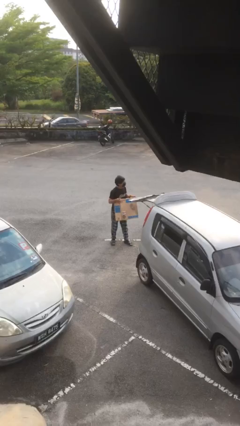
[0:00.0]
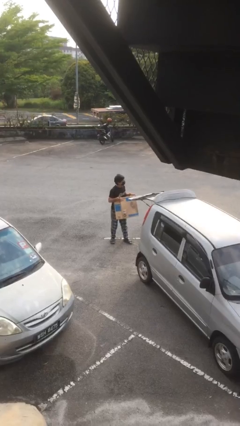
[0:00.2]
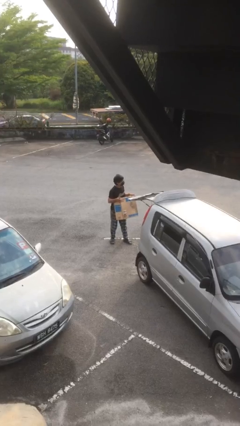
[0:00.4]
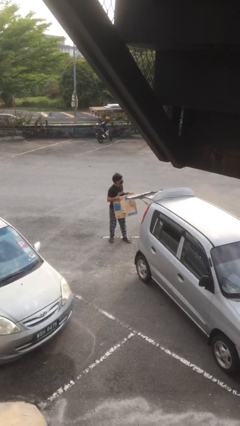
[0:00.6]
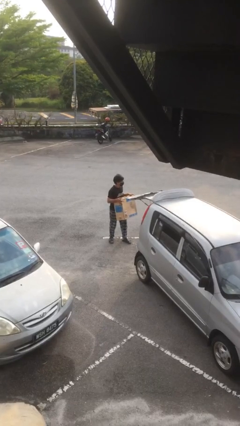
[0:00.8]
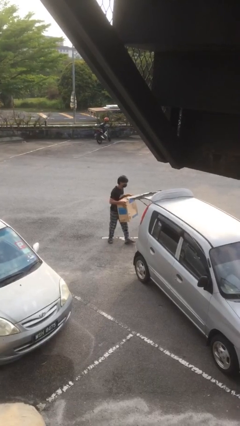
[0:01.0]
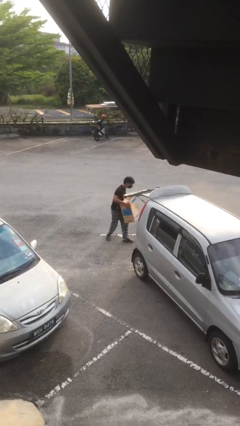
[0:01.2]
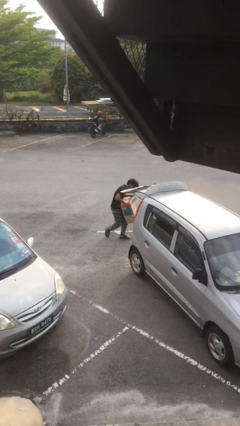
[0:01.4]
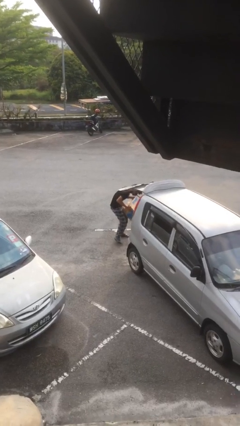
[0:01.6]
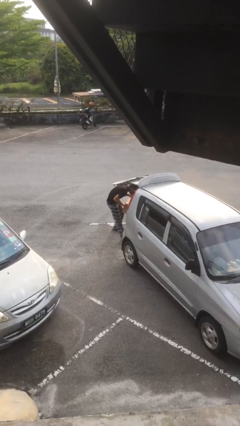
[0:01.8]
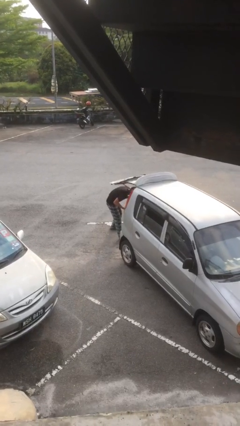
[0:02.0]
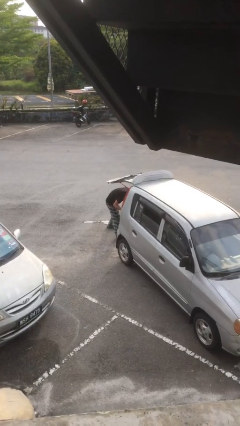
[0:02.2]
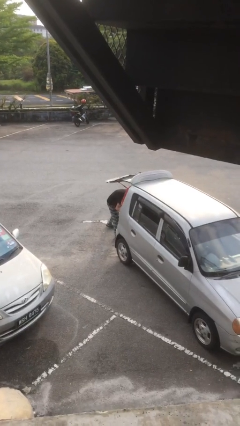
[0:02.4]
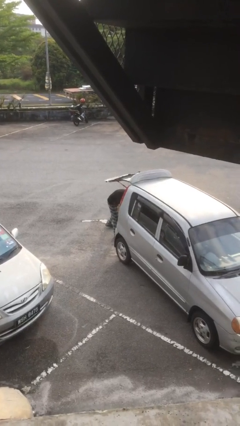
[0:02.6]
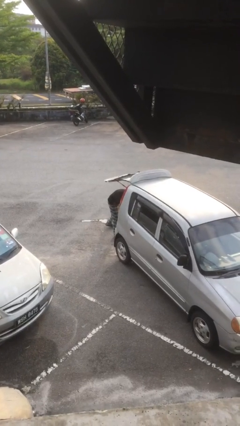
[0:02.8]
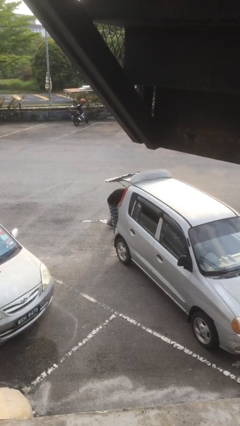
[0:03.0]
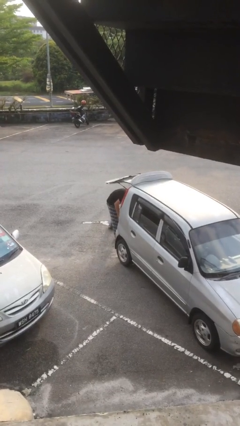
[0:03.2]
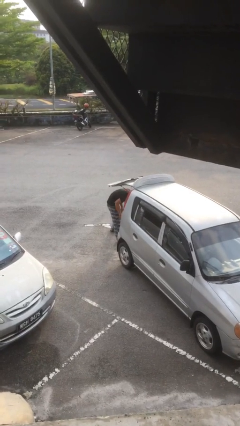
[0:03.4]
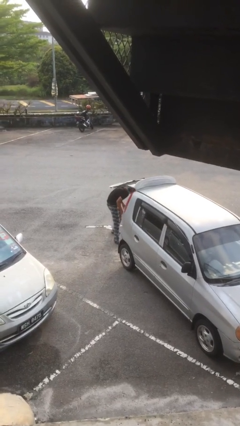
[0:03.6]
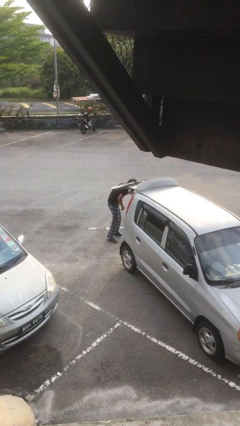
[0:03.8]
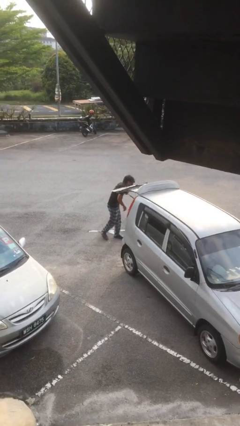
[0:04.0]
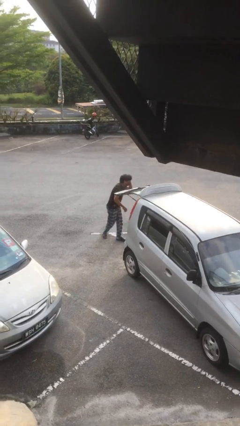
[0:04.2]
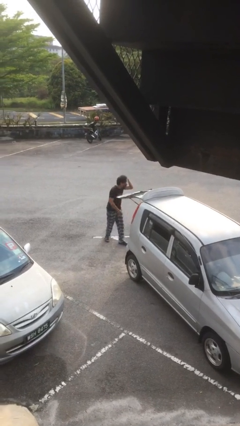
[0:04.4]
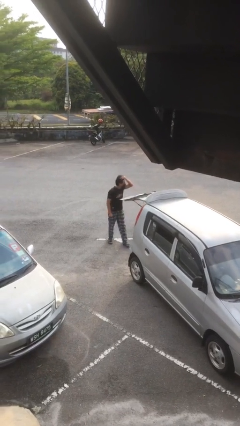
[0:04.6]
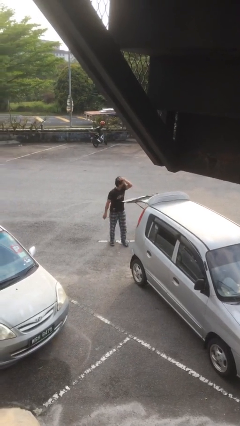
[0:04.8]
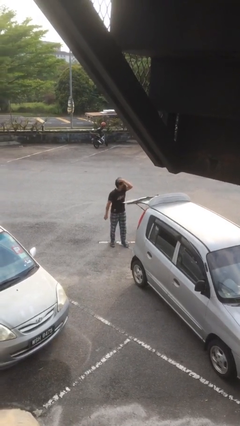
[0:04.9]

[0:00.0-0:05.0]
person loads car

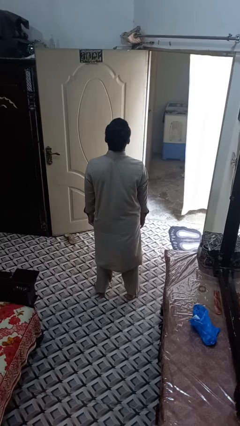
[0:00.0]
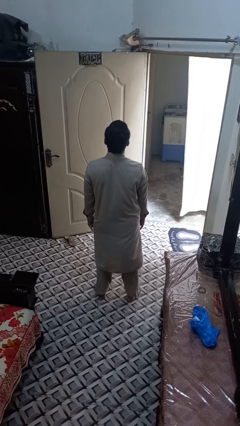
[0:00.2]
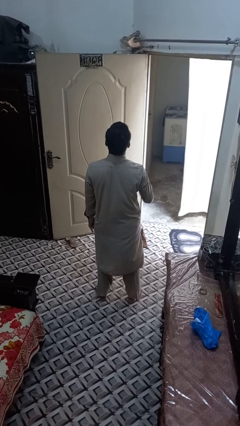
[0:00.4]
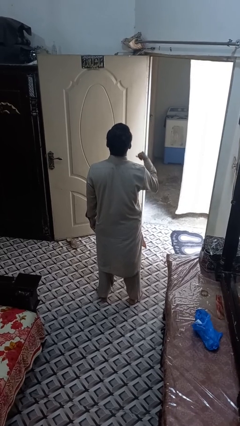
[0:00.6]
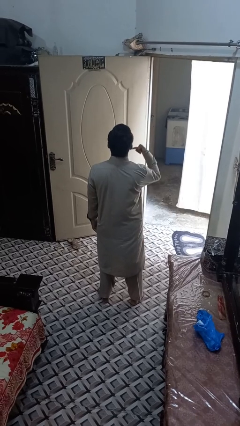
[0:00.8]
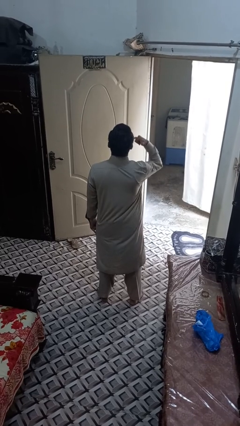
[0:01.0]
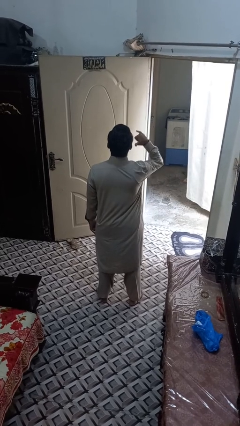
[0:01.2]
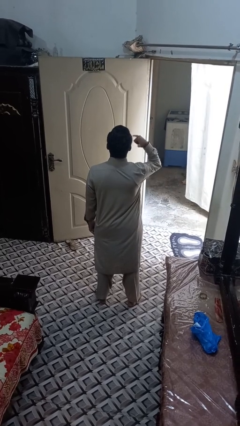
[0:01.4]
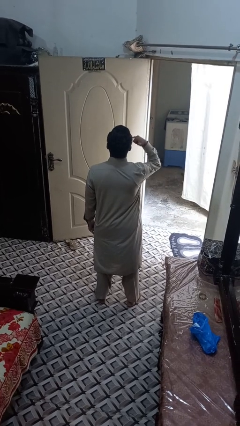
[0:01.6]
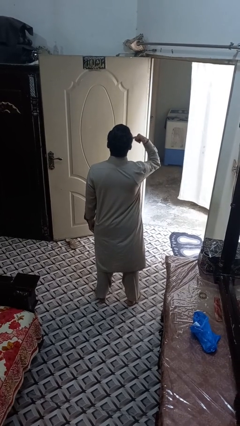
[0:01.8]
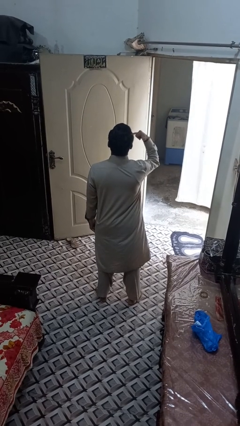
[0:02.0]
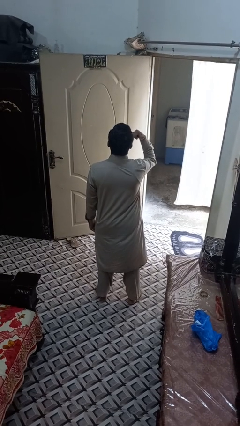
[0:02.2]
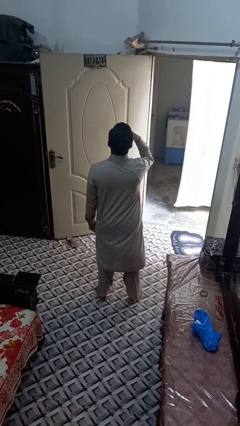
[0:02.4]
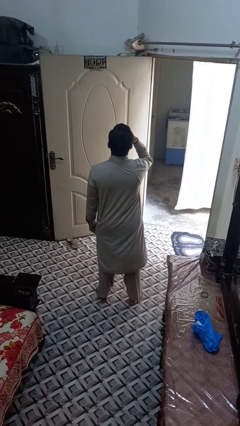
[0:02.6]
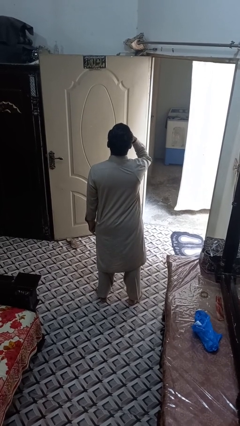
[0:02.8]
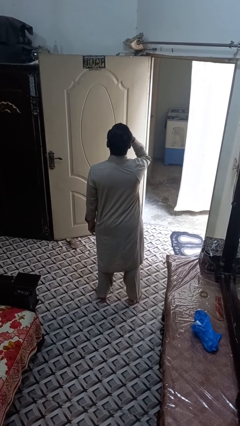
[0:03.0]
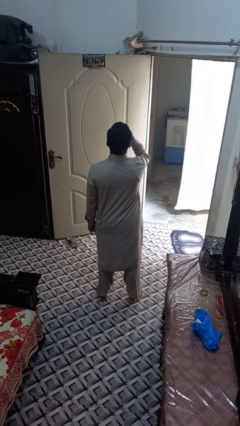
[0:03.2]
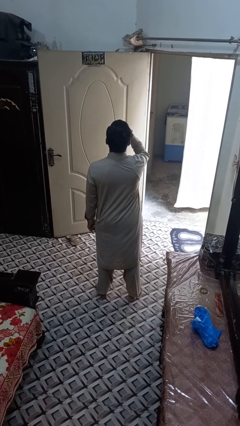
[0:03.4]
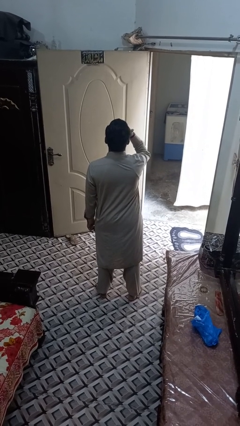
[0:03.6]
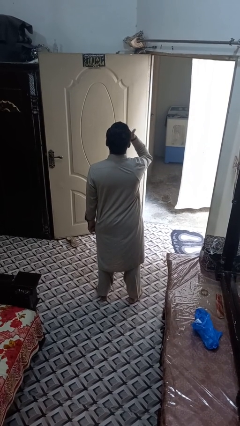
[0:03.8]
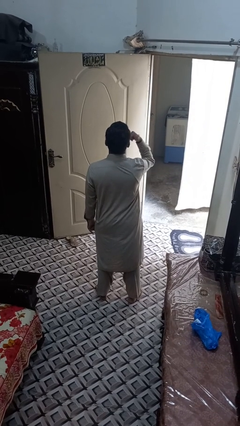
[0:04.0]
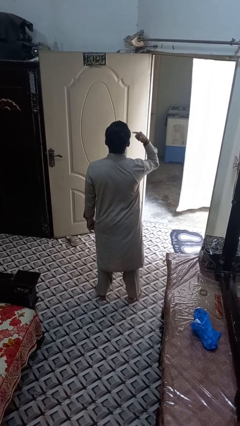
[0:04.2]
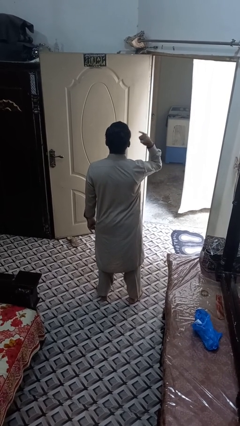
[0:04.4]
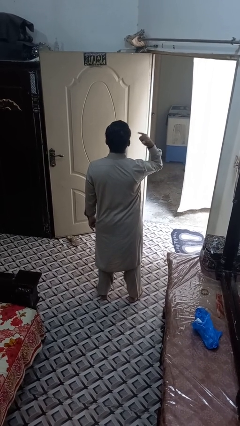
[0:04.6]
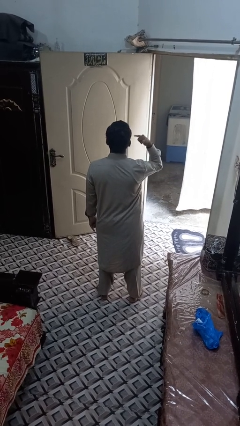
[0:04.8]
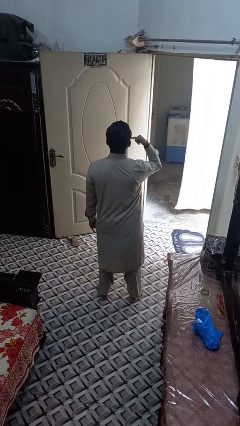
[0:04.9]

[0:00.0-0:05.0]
person gestures hang loose

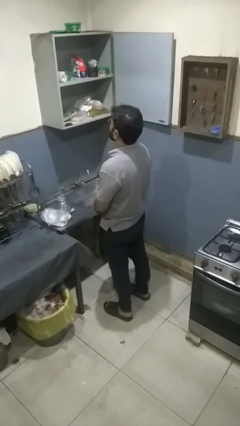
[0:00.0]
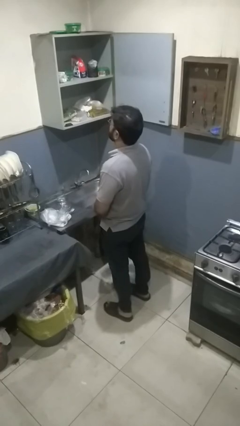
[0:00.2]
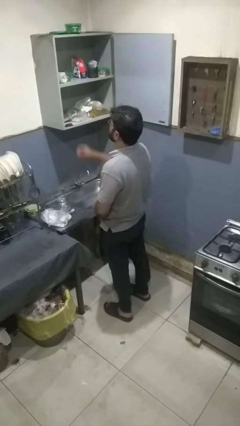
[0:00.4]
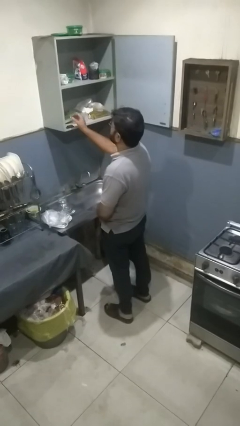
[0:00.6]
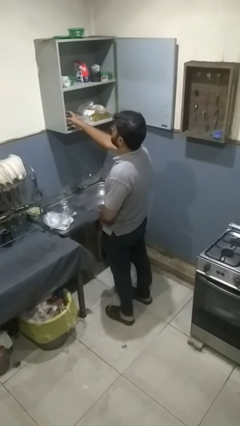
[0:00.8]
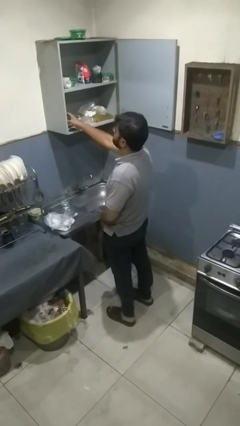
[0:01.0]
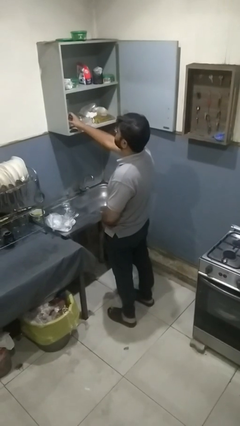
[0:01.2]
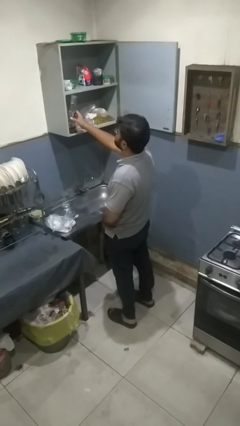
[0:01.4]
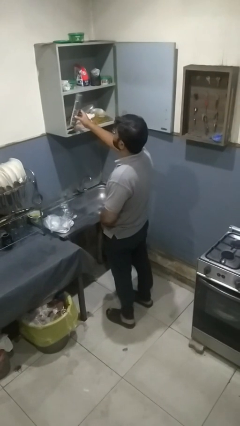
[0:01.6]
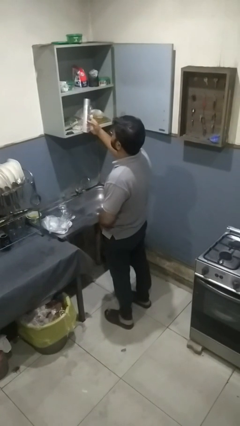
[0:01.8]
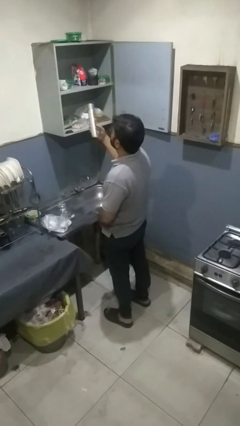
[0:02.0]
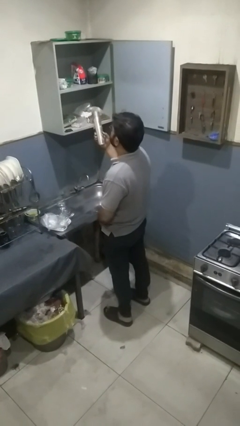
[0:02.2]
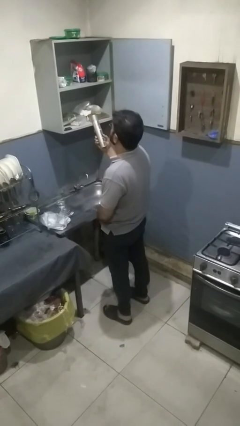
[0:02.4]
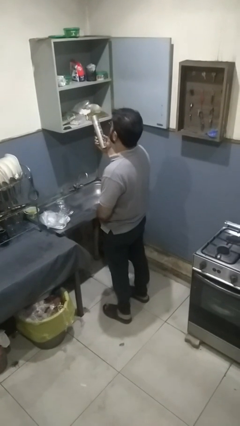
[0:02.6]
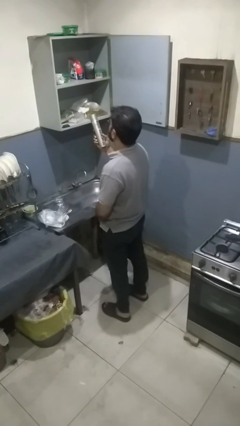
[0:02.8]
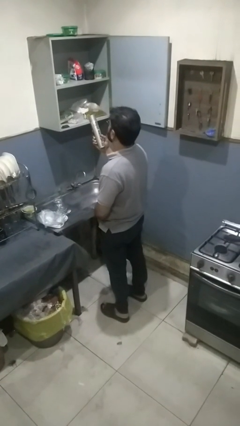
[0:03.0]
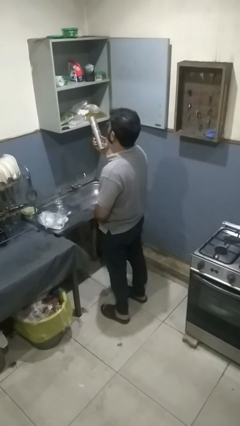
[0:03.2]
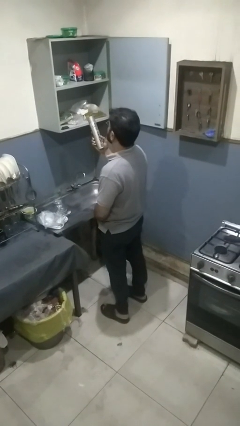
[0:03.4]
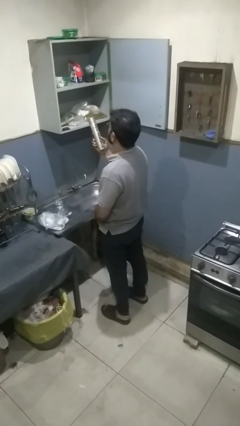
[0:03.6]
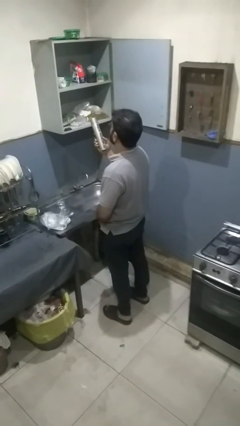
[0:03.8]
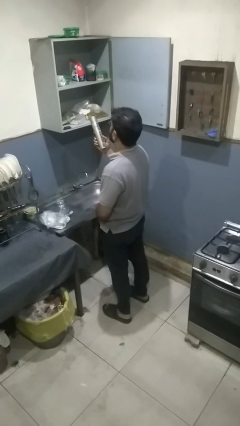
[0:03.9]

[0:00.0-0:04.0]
person picks up object from cabinet

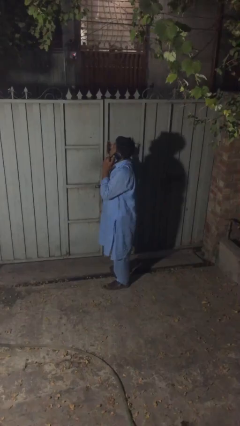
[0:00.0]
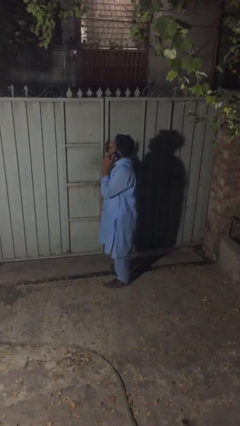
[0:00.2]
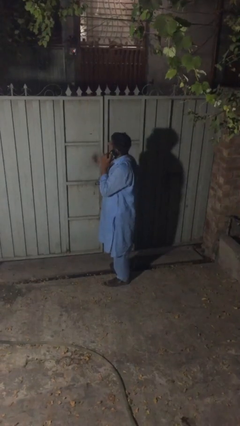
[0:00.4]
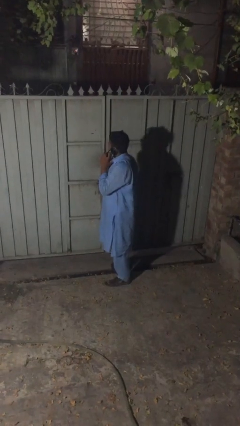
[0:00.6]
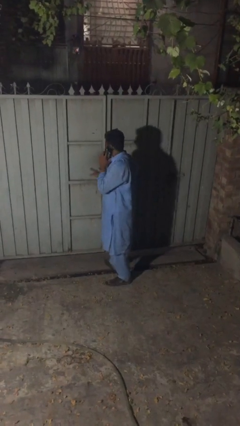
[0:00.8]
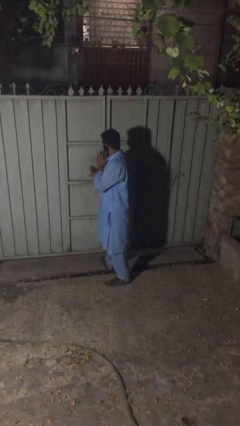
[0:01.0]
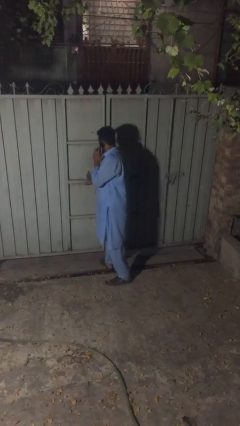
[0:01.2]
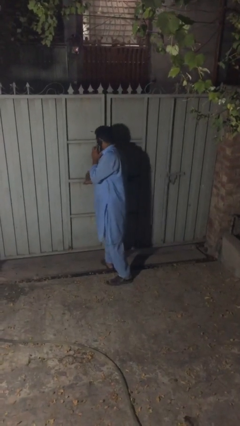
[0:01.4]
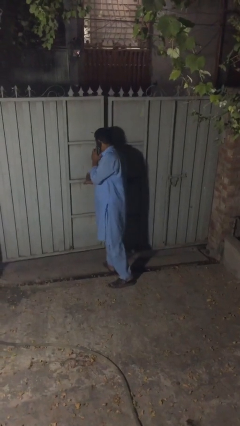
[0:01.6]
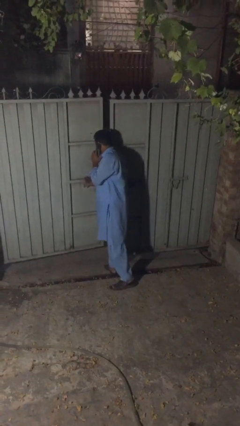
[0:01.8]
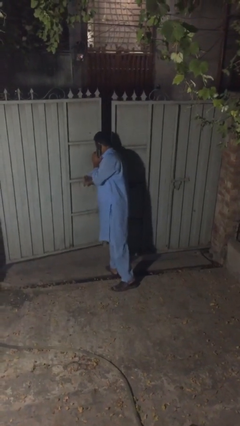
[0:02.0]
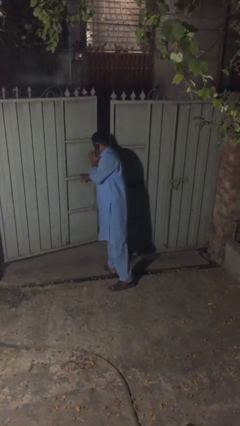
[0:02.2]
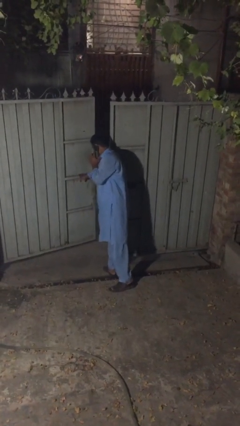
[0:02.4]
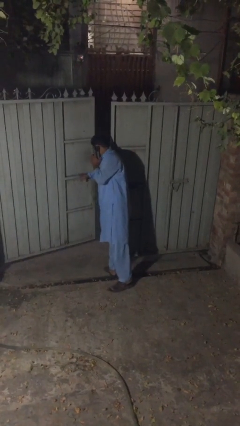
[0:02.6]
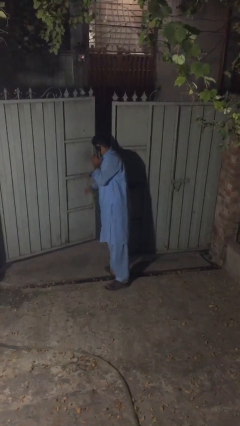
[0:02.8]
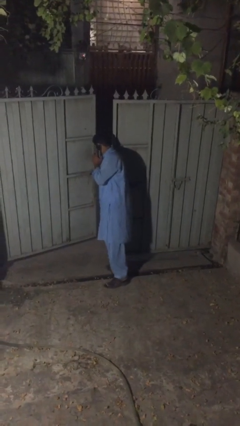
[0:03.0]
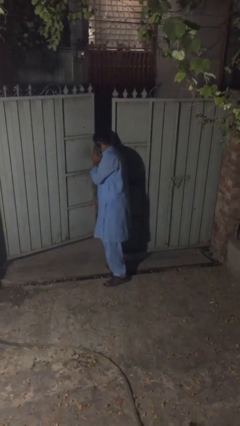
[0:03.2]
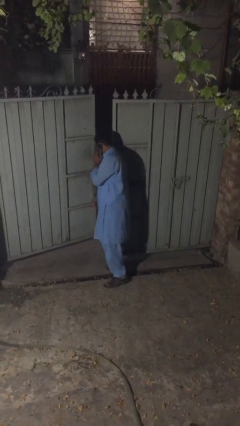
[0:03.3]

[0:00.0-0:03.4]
person opens facility door
